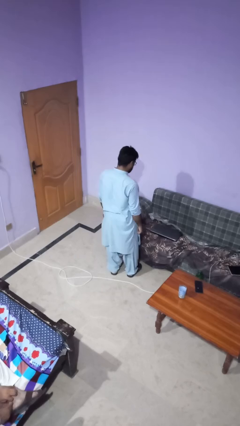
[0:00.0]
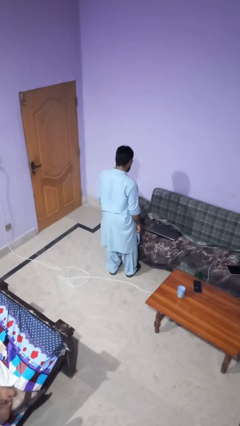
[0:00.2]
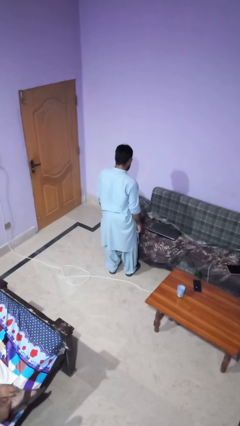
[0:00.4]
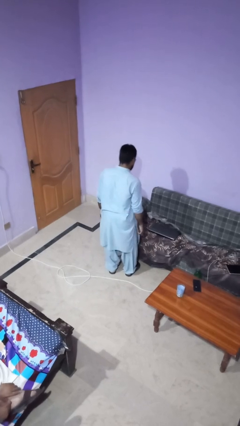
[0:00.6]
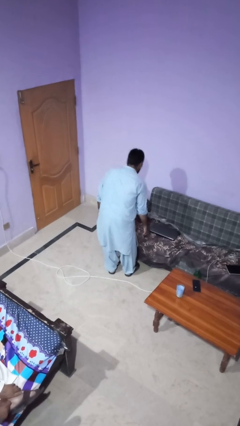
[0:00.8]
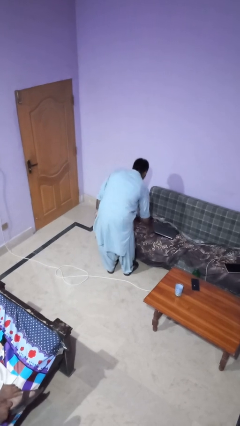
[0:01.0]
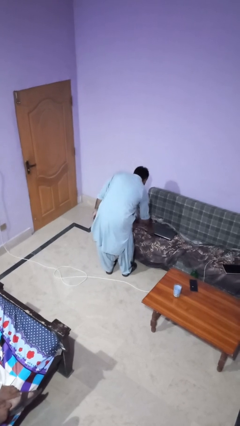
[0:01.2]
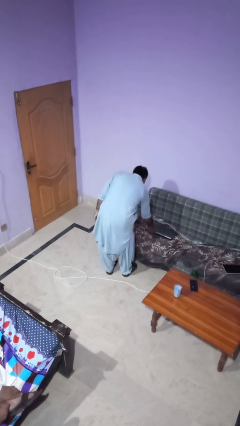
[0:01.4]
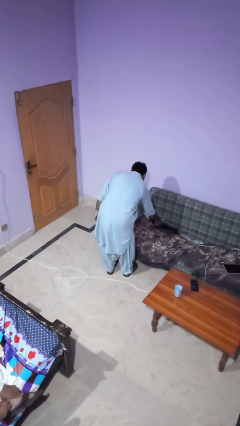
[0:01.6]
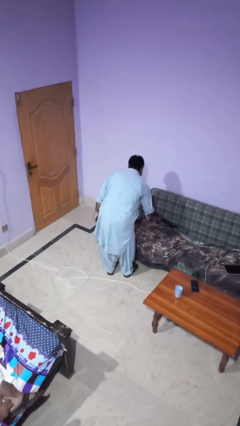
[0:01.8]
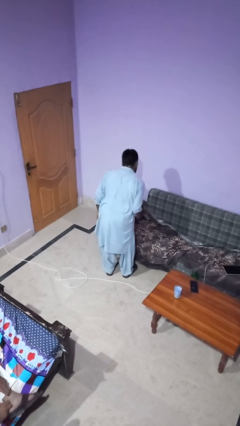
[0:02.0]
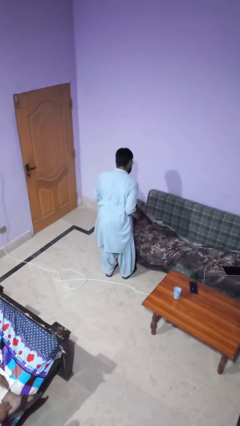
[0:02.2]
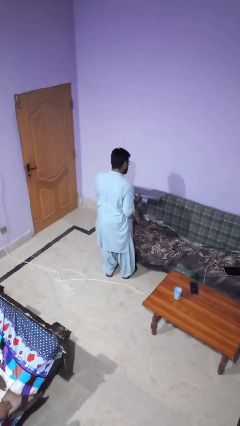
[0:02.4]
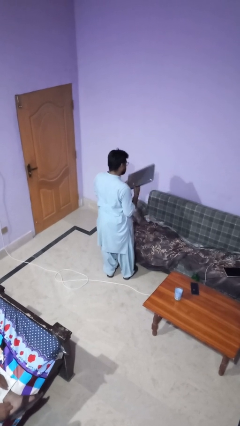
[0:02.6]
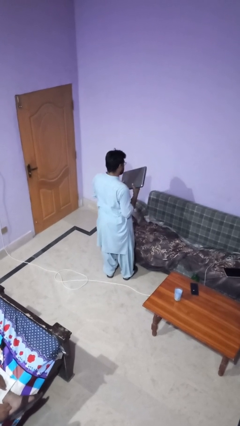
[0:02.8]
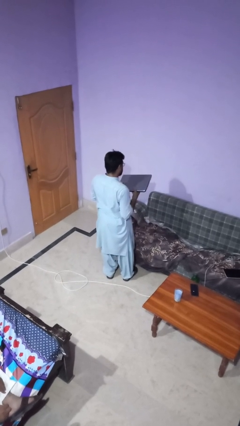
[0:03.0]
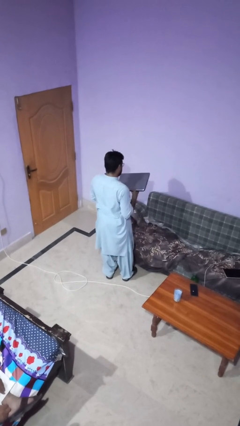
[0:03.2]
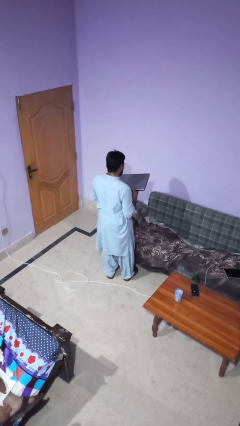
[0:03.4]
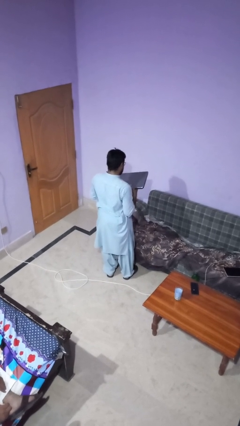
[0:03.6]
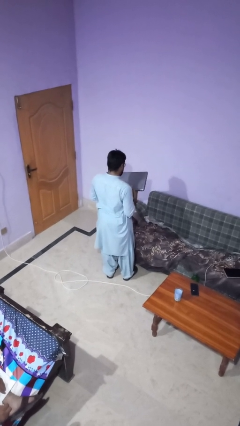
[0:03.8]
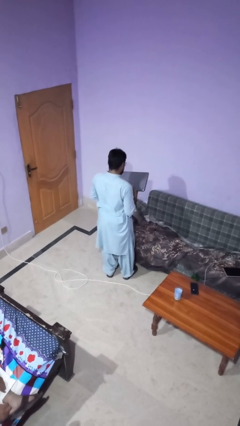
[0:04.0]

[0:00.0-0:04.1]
person picks up object from couch

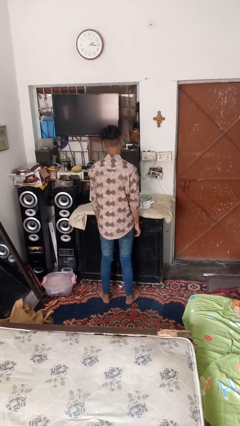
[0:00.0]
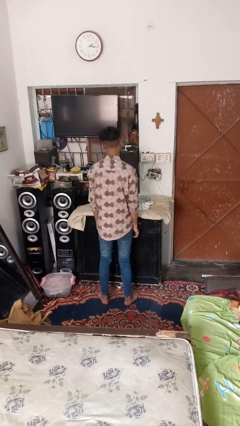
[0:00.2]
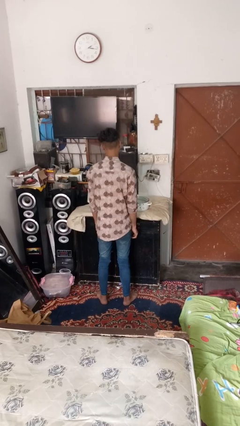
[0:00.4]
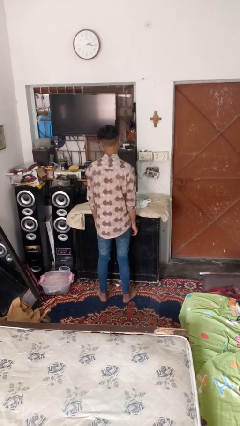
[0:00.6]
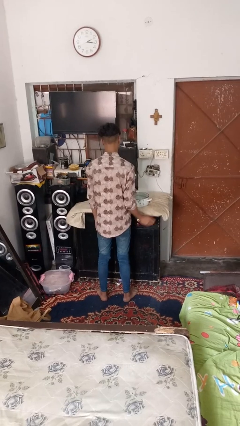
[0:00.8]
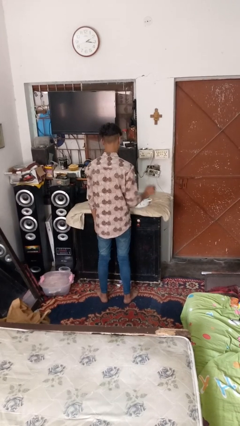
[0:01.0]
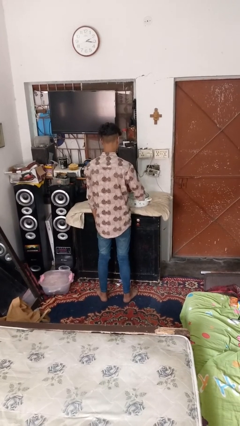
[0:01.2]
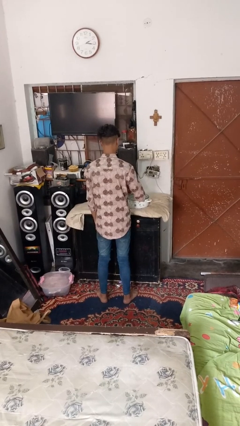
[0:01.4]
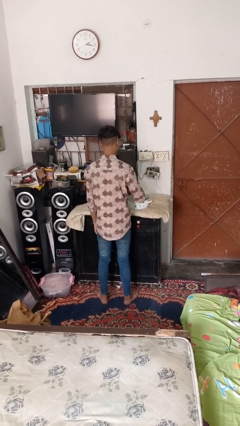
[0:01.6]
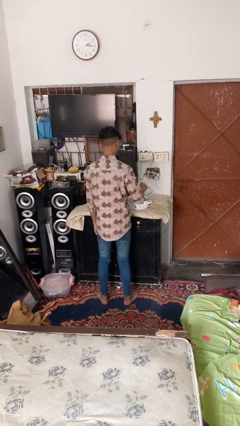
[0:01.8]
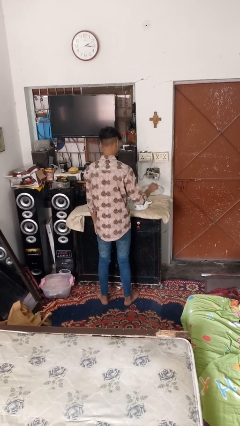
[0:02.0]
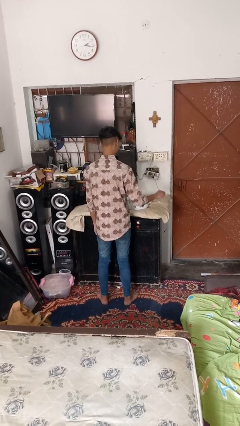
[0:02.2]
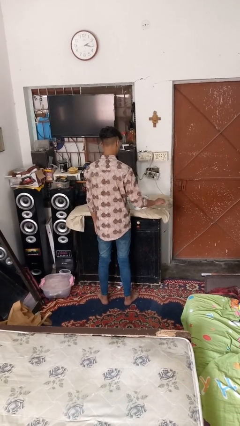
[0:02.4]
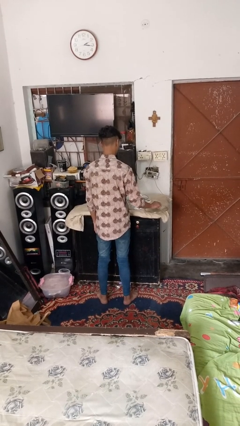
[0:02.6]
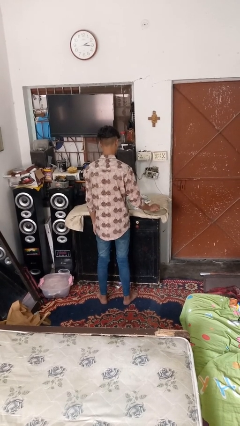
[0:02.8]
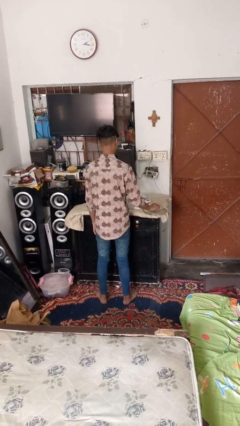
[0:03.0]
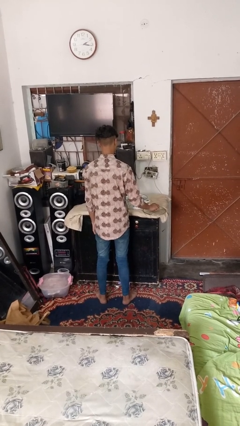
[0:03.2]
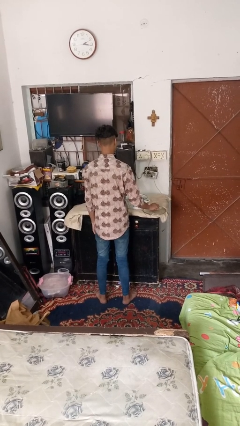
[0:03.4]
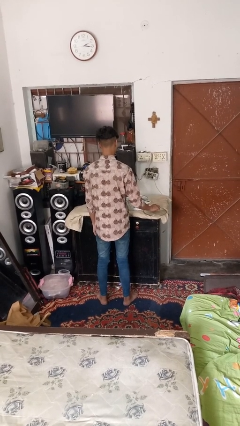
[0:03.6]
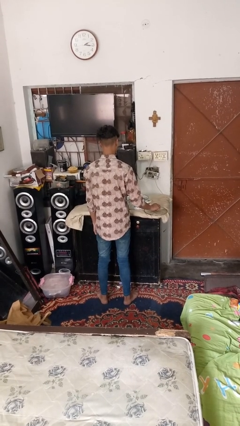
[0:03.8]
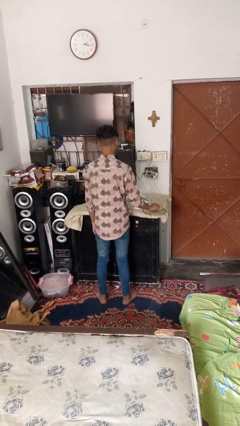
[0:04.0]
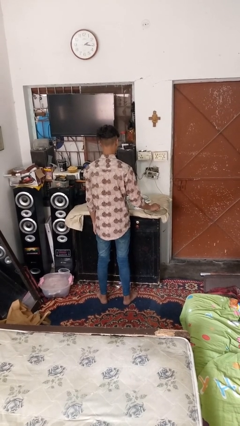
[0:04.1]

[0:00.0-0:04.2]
person opens jar

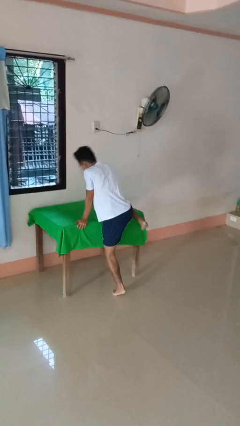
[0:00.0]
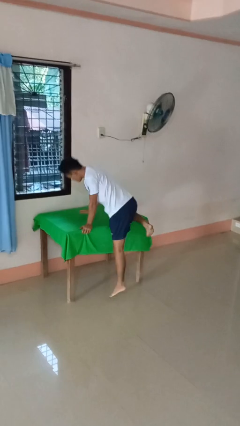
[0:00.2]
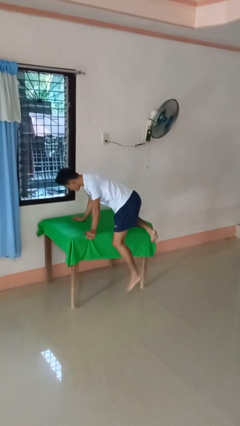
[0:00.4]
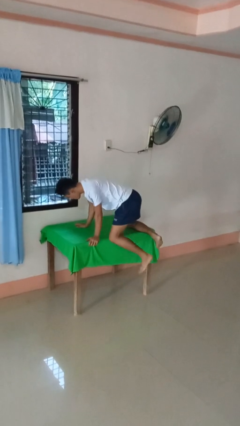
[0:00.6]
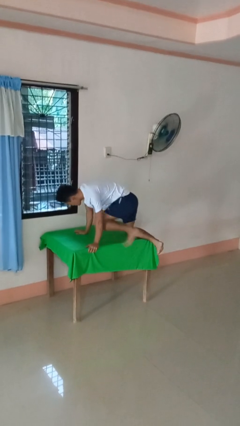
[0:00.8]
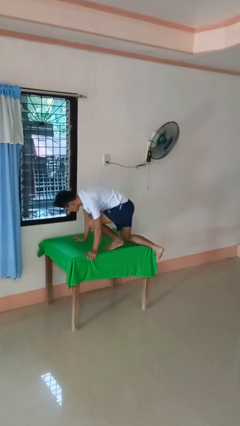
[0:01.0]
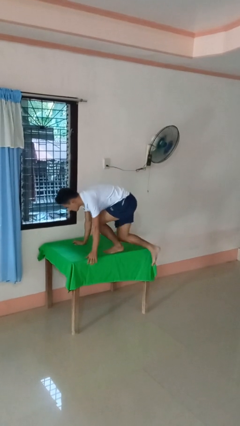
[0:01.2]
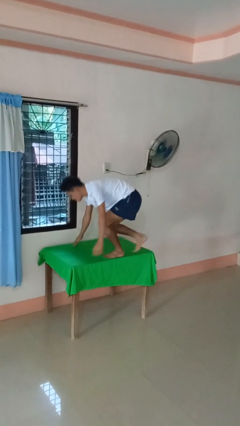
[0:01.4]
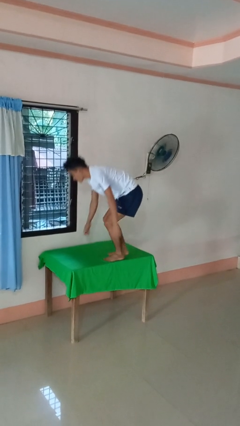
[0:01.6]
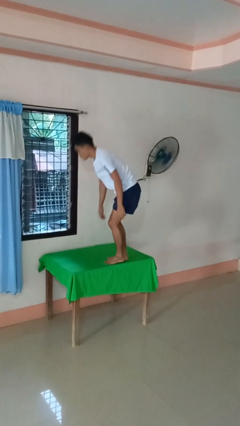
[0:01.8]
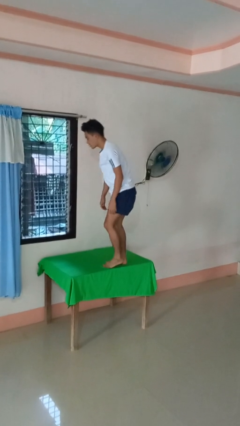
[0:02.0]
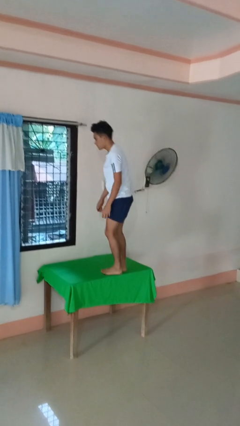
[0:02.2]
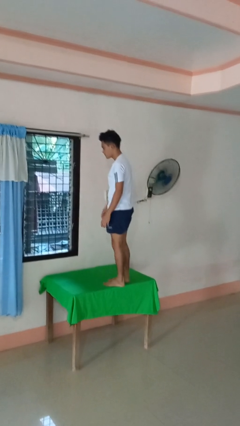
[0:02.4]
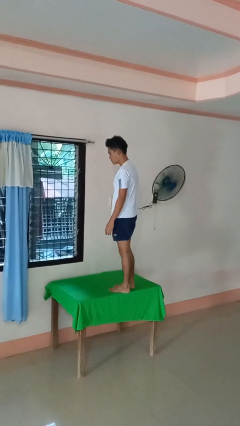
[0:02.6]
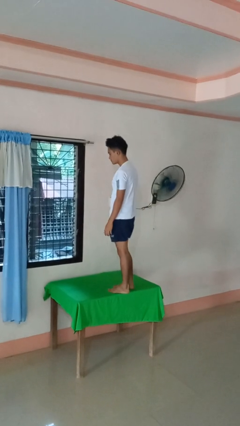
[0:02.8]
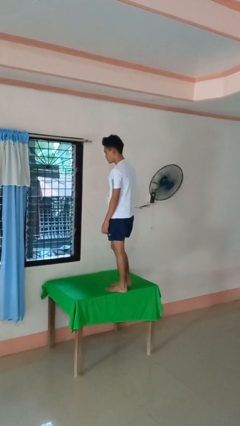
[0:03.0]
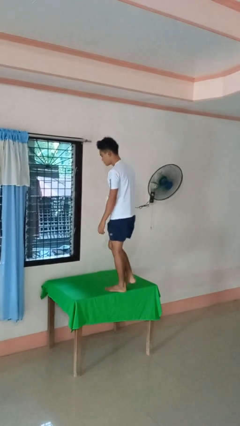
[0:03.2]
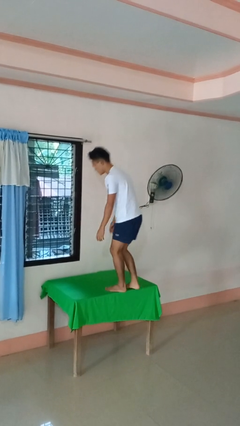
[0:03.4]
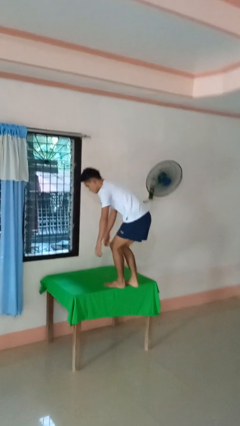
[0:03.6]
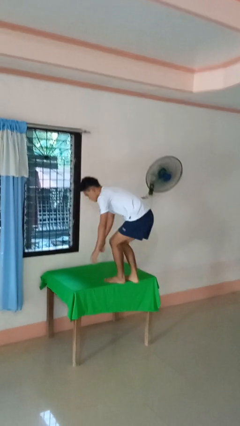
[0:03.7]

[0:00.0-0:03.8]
person climbs on table

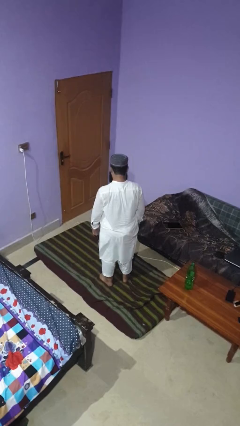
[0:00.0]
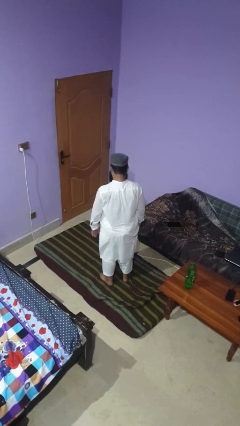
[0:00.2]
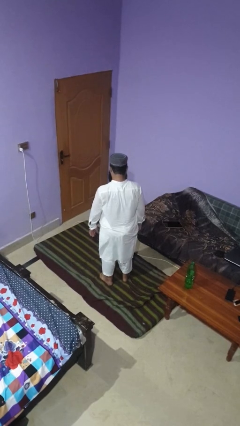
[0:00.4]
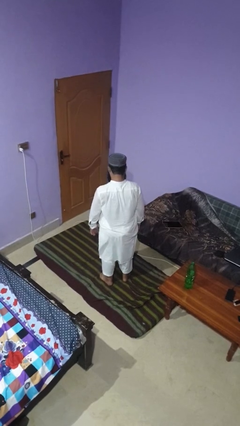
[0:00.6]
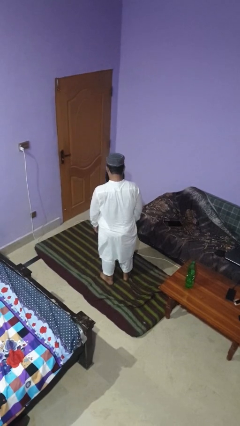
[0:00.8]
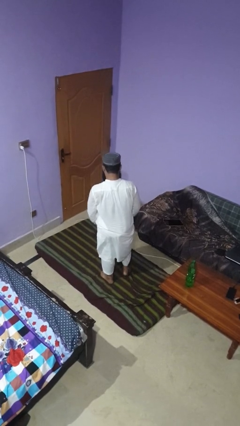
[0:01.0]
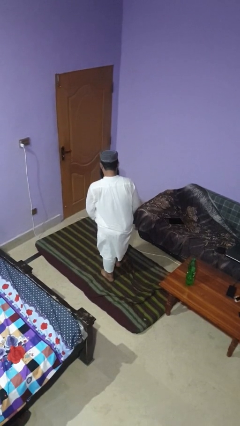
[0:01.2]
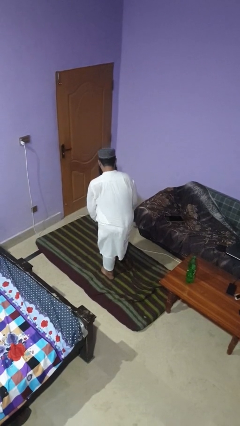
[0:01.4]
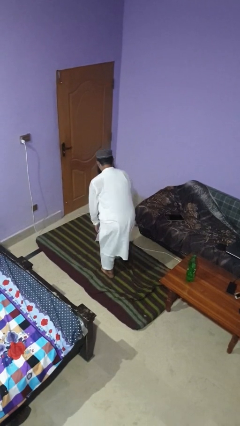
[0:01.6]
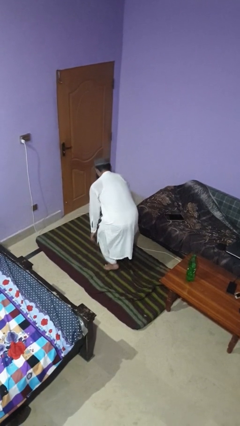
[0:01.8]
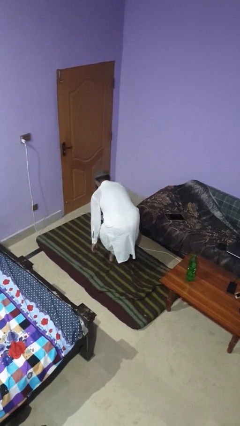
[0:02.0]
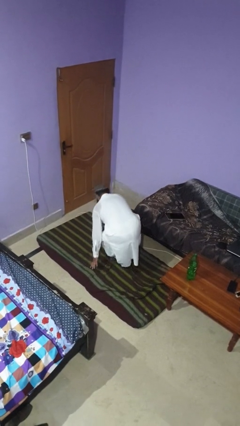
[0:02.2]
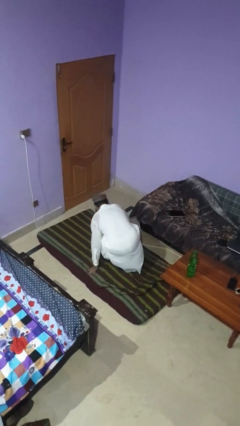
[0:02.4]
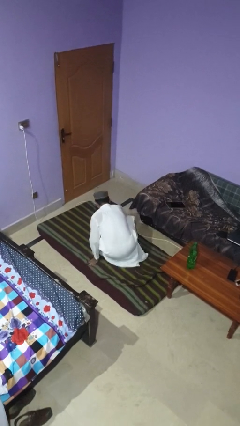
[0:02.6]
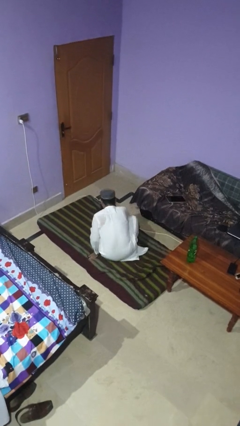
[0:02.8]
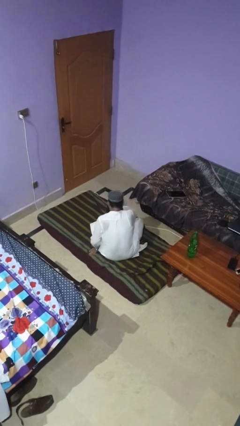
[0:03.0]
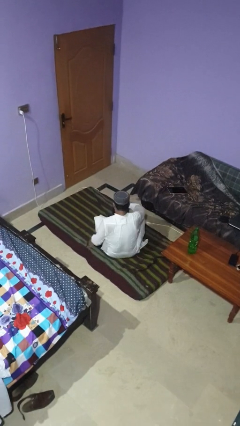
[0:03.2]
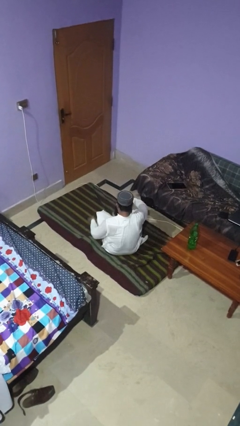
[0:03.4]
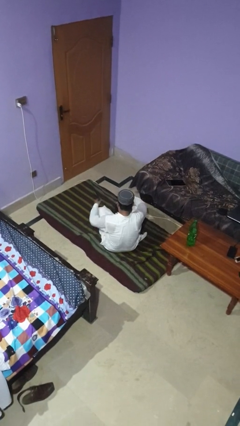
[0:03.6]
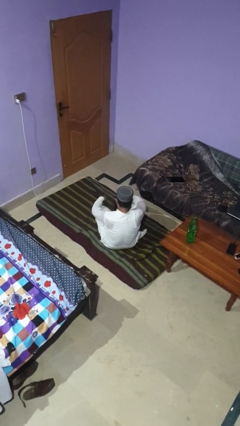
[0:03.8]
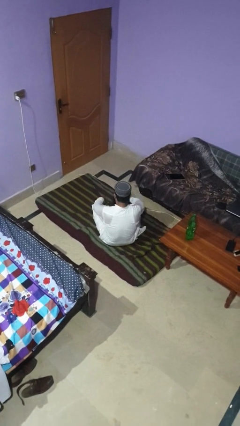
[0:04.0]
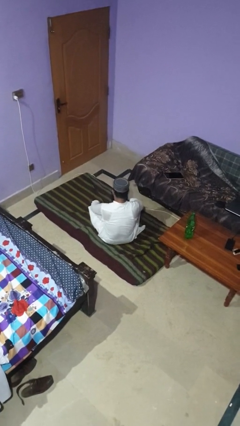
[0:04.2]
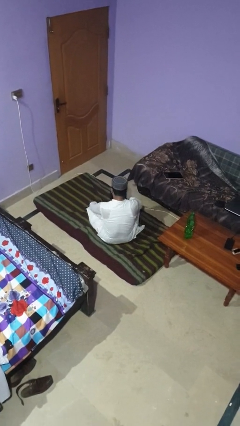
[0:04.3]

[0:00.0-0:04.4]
person sits crisscross

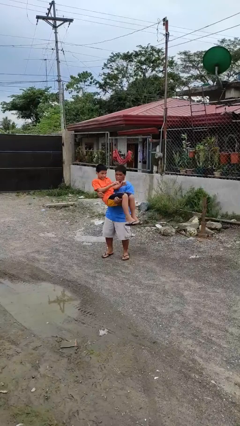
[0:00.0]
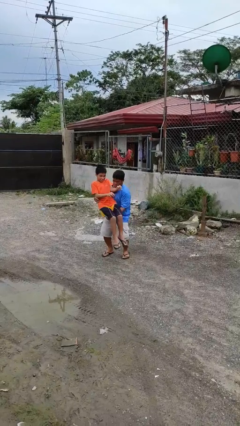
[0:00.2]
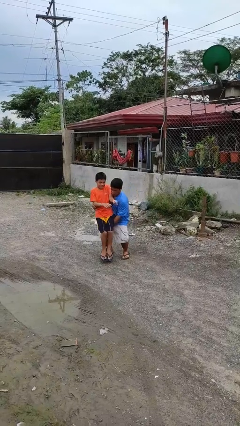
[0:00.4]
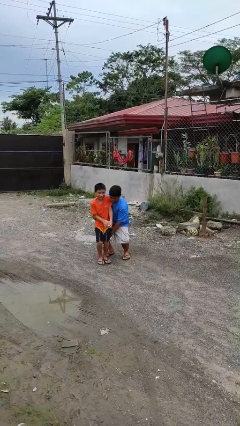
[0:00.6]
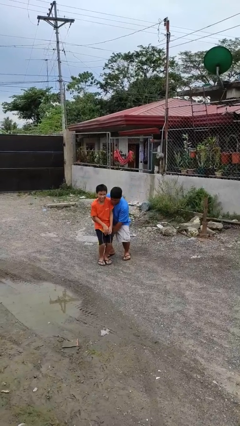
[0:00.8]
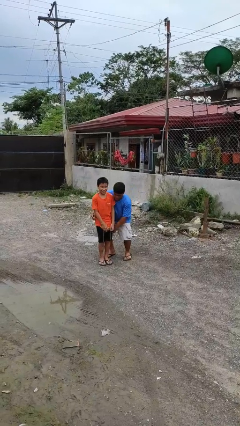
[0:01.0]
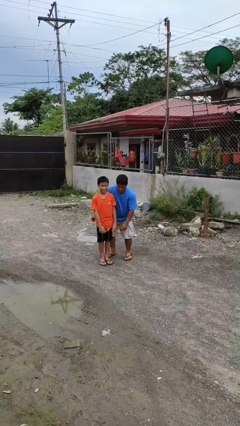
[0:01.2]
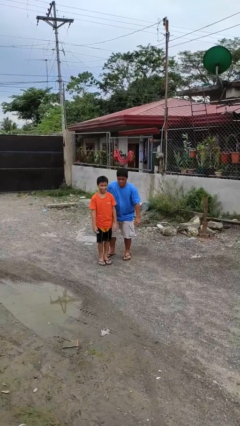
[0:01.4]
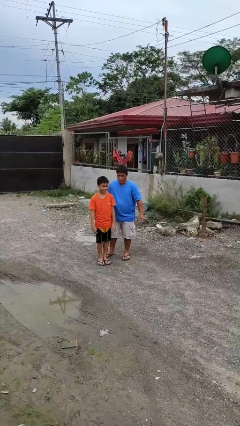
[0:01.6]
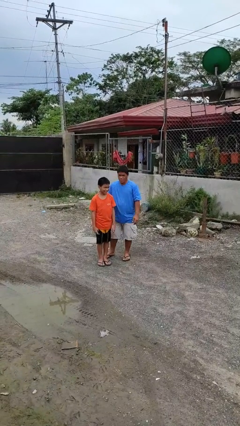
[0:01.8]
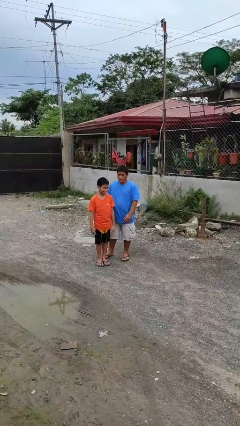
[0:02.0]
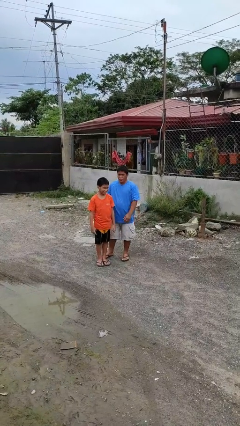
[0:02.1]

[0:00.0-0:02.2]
person puts down person
